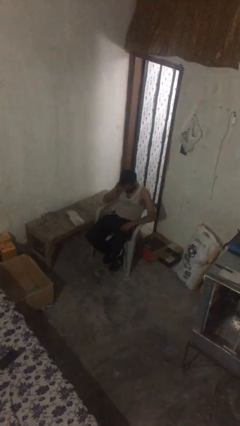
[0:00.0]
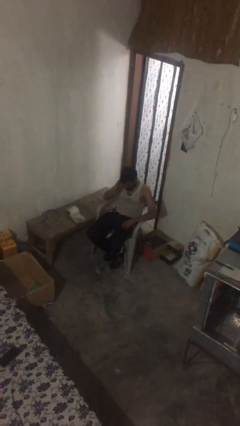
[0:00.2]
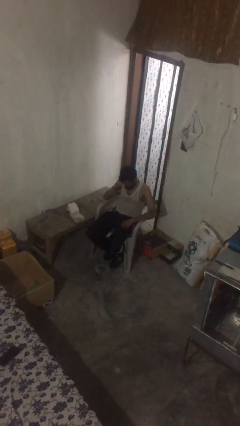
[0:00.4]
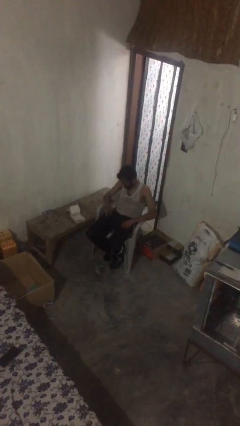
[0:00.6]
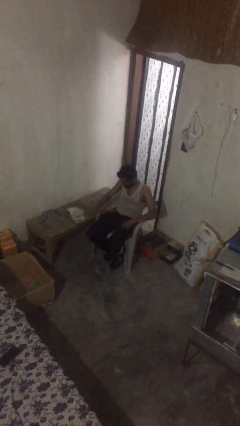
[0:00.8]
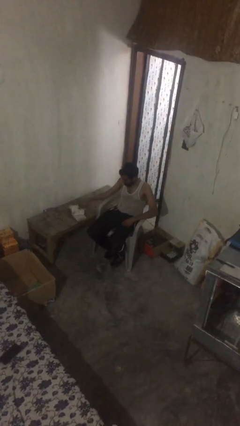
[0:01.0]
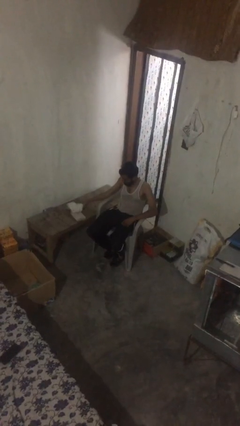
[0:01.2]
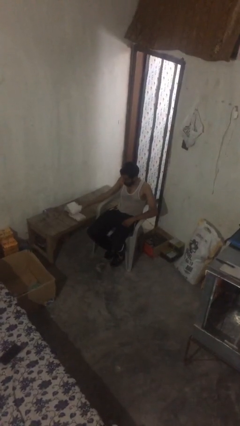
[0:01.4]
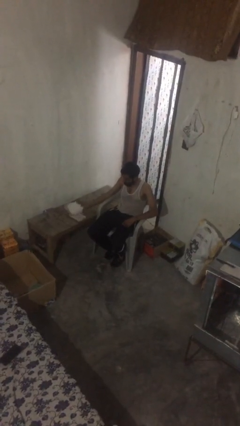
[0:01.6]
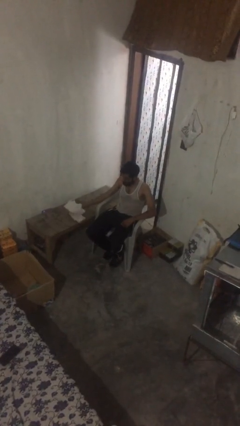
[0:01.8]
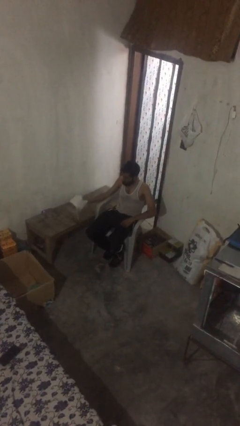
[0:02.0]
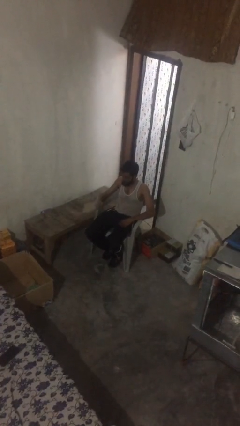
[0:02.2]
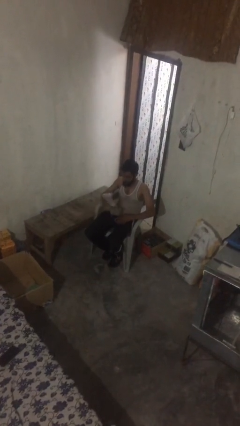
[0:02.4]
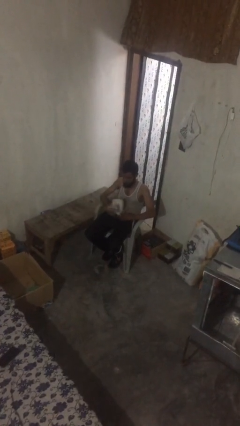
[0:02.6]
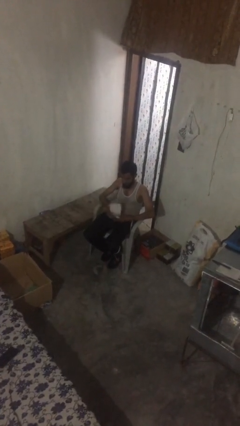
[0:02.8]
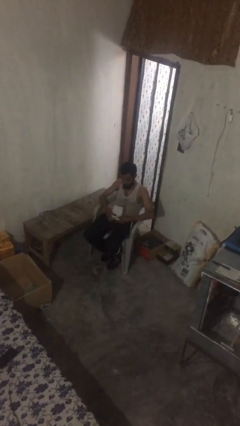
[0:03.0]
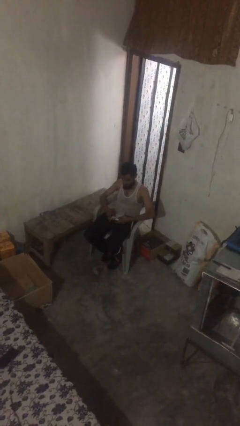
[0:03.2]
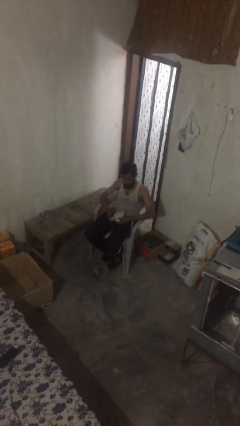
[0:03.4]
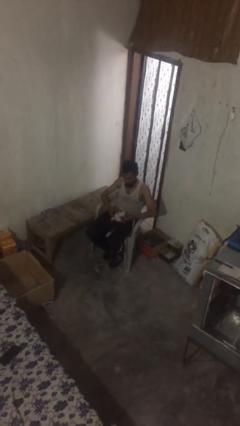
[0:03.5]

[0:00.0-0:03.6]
person picks up object from table

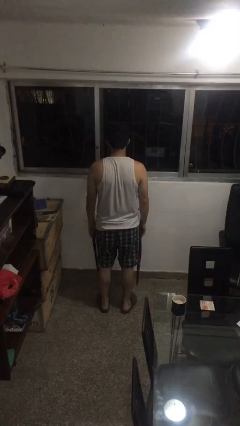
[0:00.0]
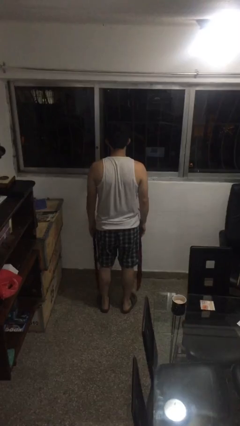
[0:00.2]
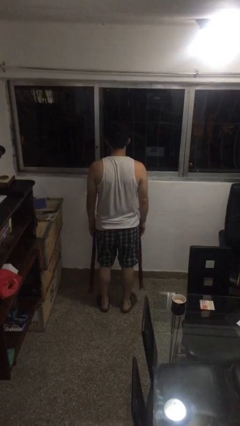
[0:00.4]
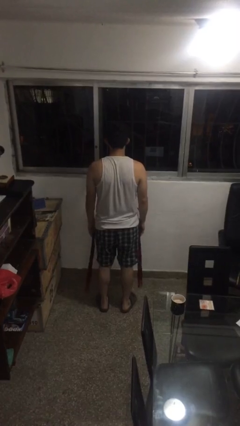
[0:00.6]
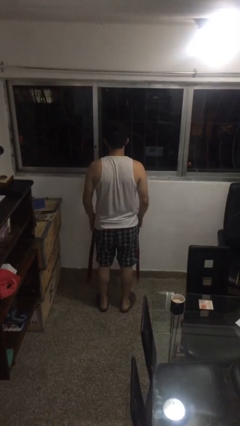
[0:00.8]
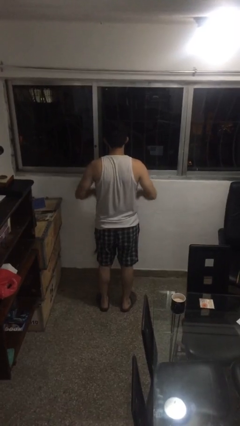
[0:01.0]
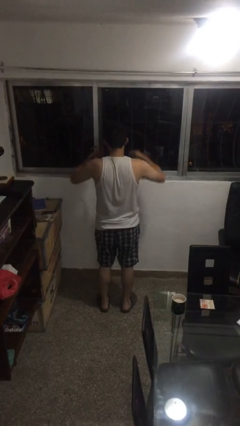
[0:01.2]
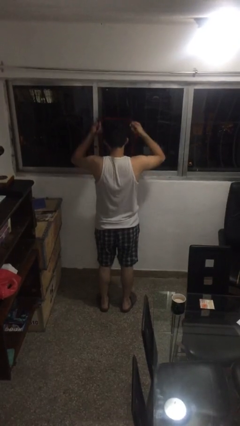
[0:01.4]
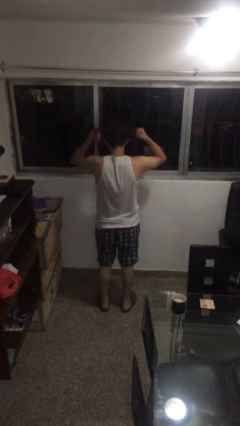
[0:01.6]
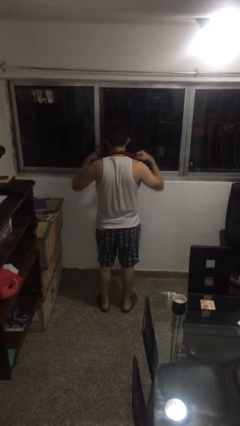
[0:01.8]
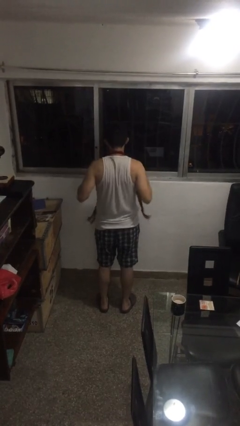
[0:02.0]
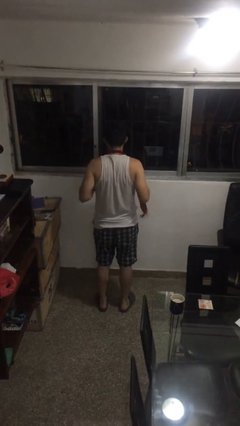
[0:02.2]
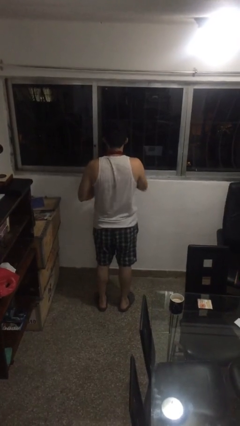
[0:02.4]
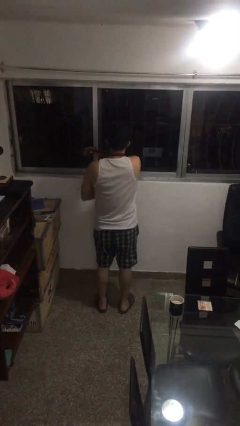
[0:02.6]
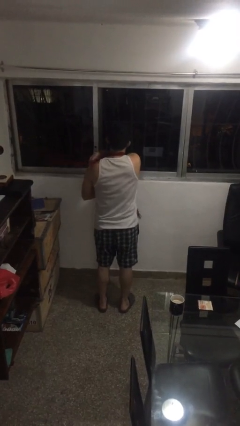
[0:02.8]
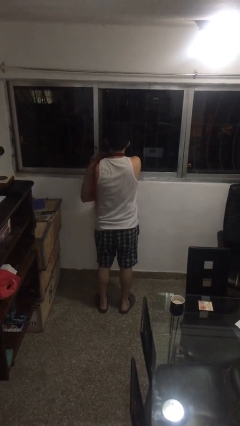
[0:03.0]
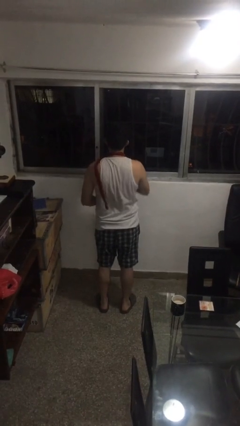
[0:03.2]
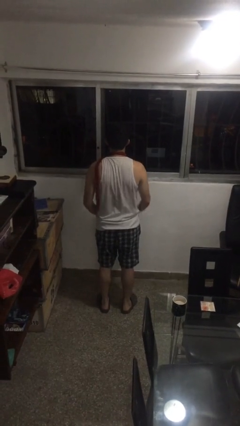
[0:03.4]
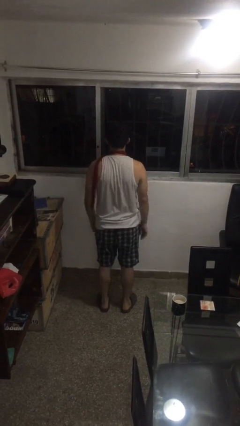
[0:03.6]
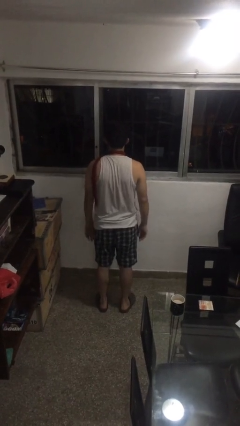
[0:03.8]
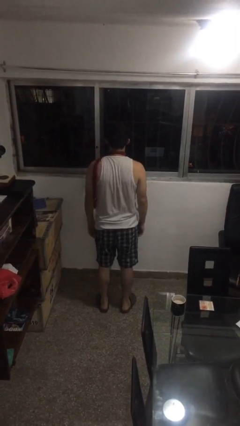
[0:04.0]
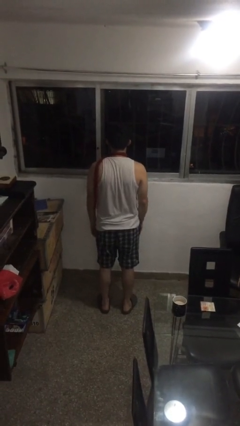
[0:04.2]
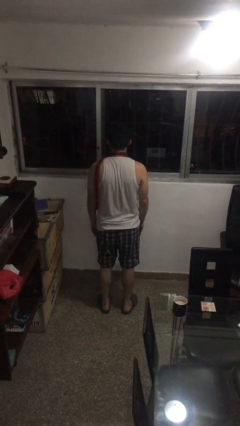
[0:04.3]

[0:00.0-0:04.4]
person puts on scarf

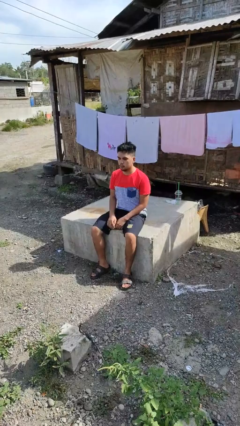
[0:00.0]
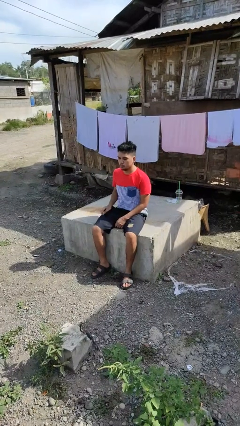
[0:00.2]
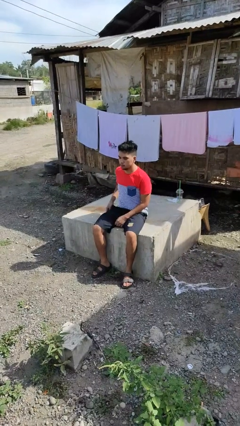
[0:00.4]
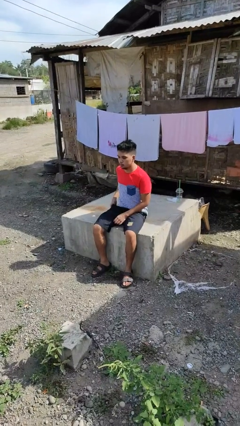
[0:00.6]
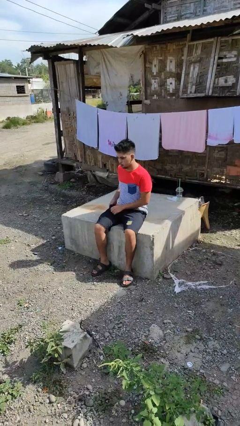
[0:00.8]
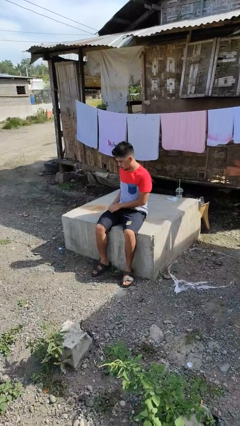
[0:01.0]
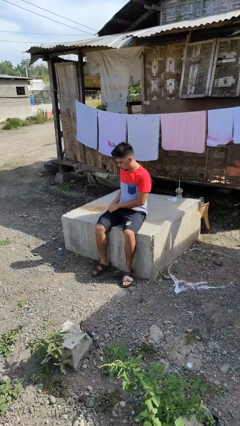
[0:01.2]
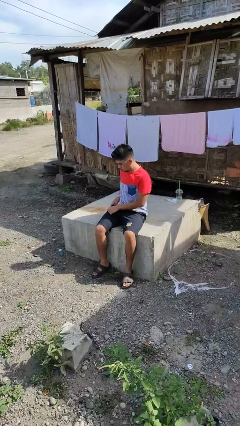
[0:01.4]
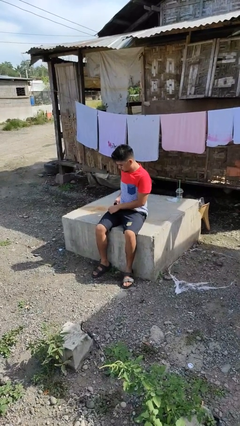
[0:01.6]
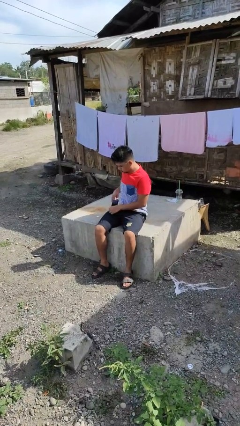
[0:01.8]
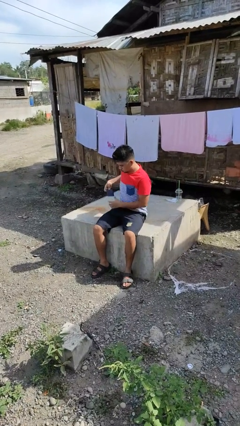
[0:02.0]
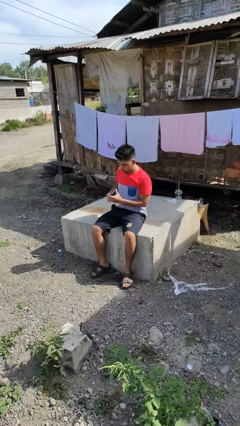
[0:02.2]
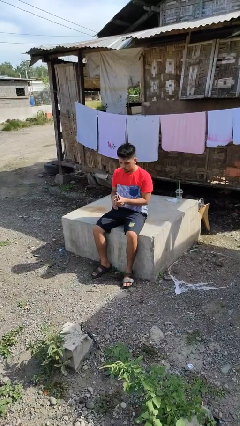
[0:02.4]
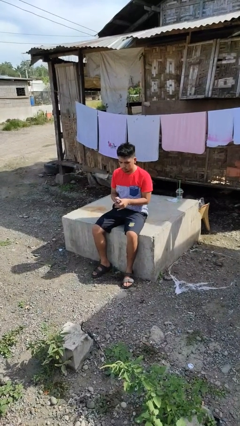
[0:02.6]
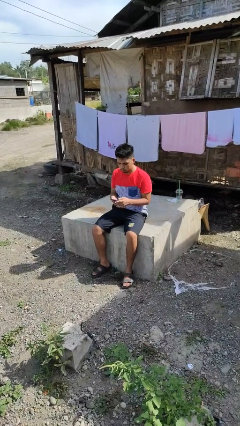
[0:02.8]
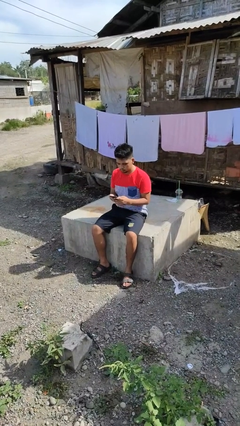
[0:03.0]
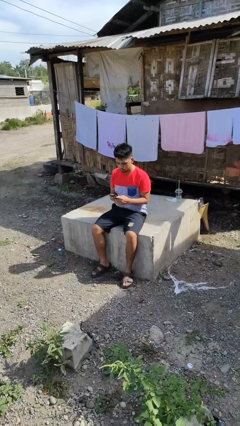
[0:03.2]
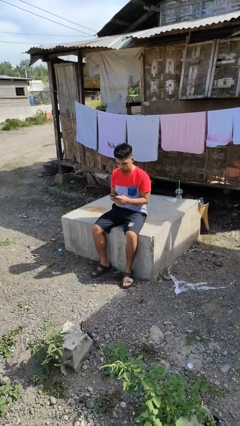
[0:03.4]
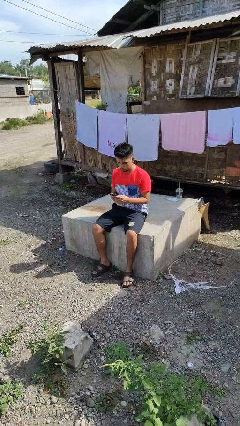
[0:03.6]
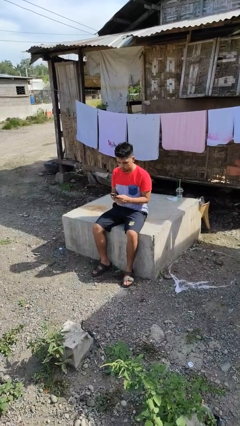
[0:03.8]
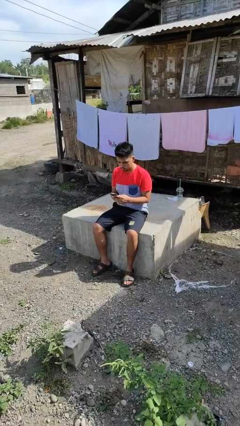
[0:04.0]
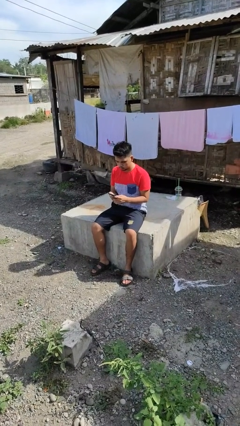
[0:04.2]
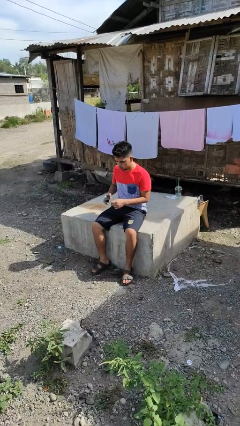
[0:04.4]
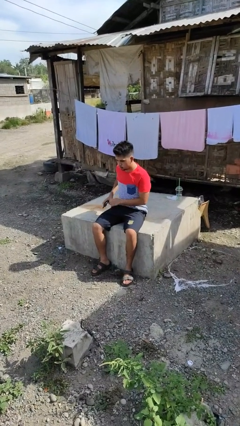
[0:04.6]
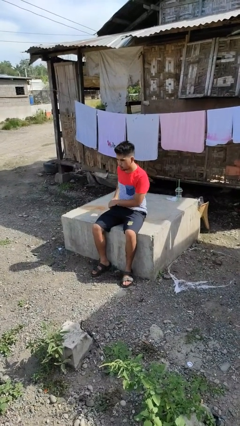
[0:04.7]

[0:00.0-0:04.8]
person takes phone from pocket

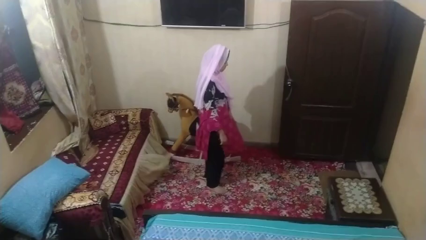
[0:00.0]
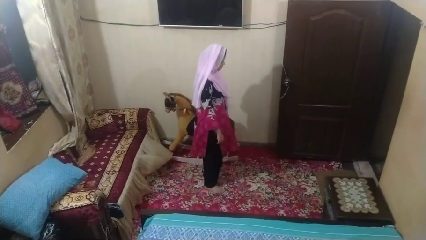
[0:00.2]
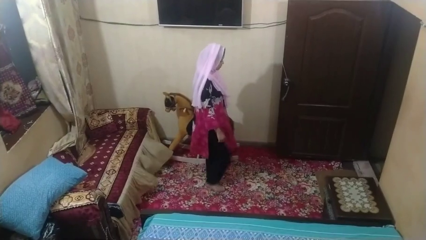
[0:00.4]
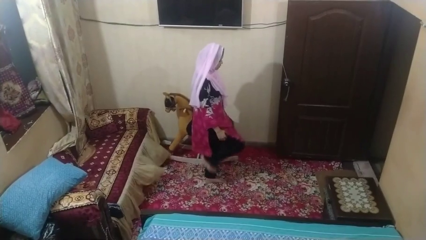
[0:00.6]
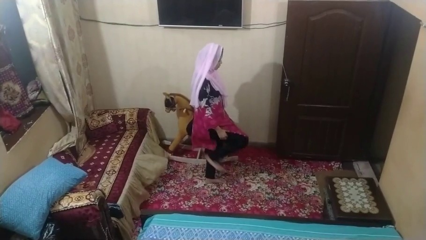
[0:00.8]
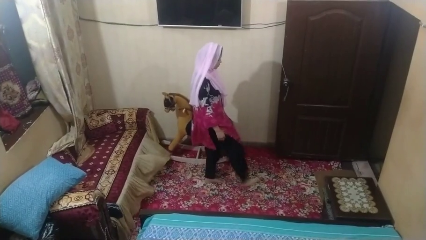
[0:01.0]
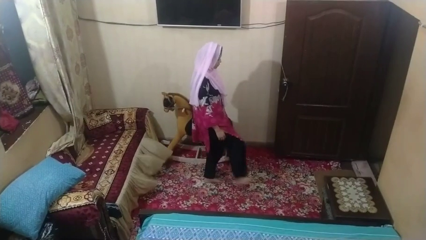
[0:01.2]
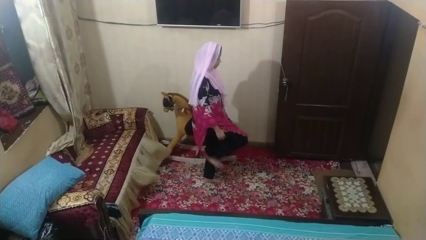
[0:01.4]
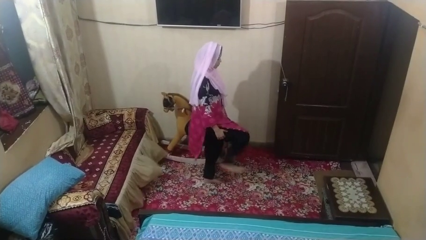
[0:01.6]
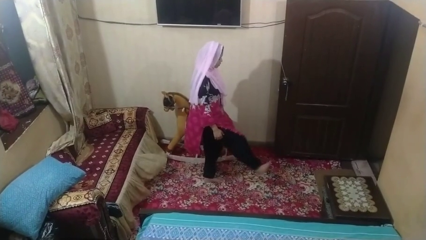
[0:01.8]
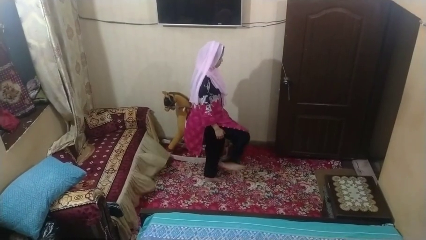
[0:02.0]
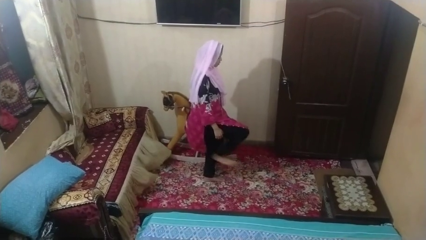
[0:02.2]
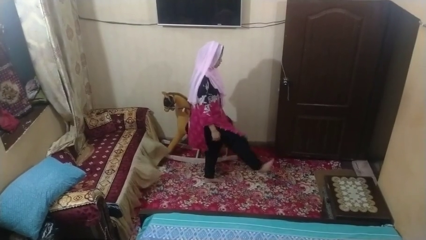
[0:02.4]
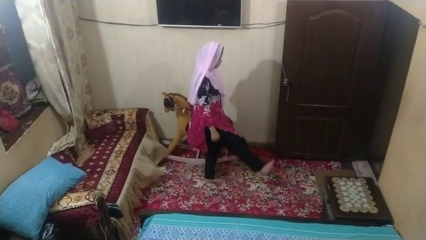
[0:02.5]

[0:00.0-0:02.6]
person karate kicks

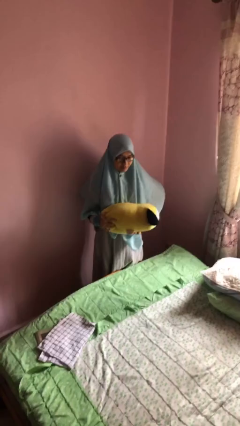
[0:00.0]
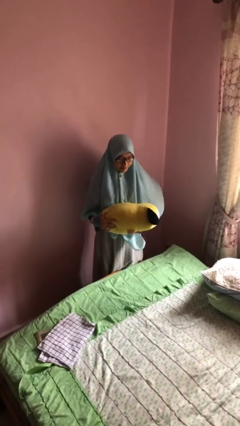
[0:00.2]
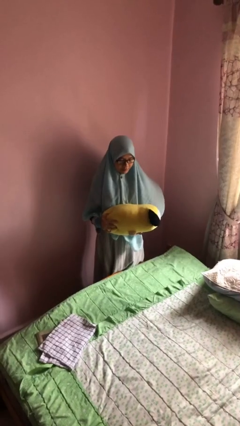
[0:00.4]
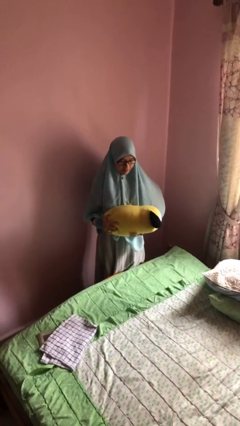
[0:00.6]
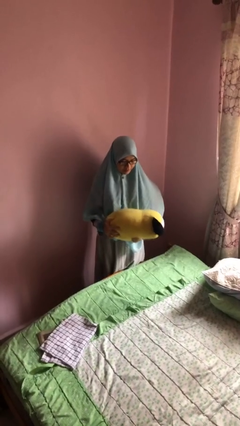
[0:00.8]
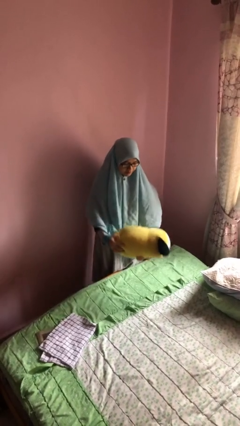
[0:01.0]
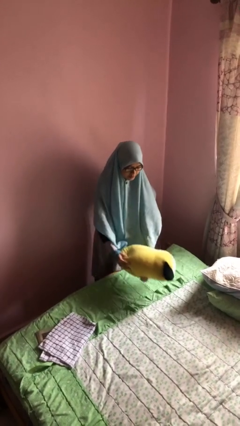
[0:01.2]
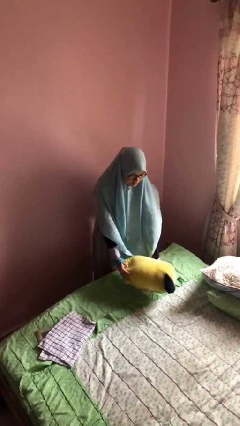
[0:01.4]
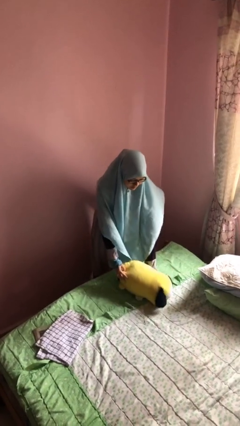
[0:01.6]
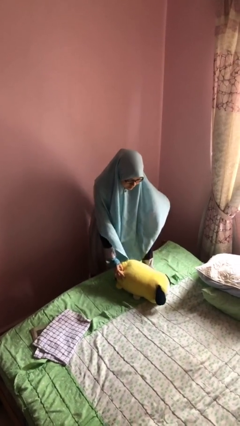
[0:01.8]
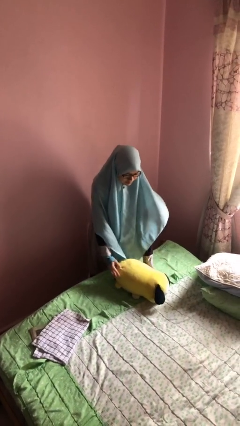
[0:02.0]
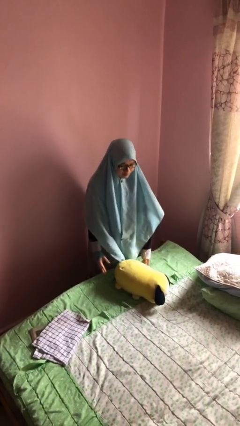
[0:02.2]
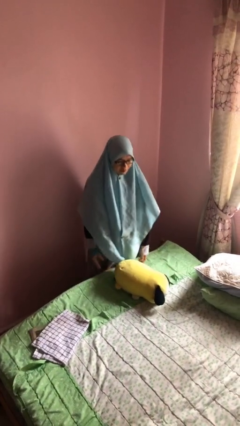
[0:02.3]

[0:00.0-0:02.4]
person puts down object on bed
